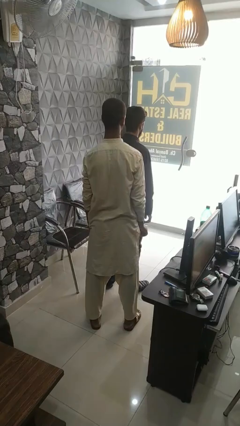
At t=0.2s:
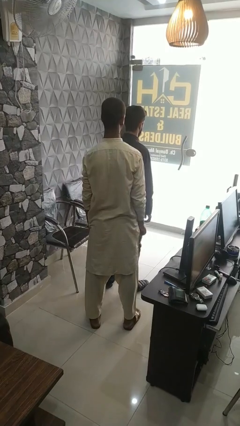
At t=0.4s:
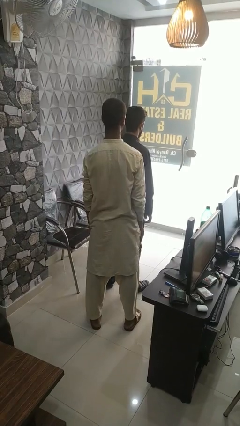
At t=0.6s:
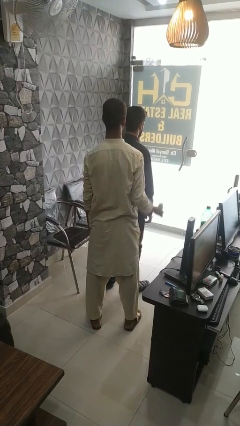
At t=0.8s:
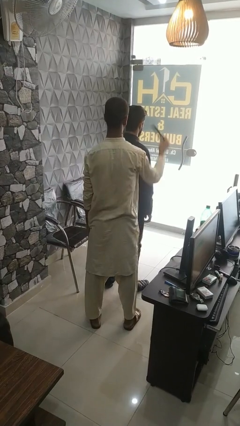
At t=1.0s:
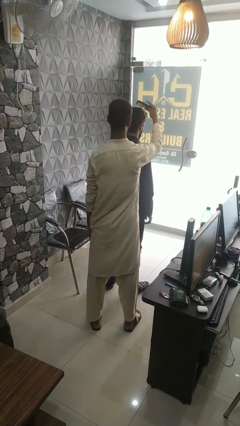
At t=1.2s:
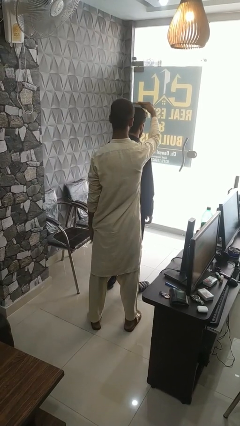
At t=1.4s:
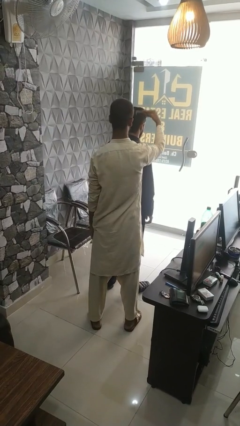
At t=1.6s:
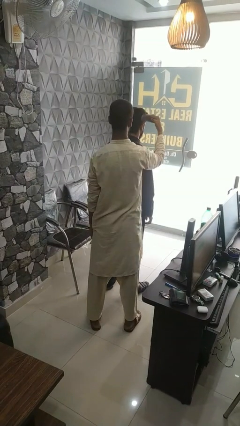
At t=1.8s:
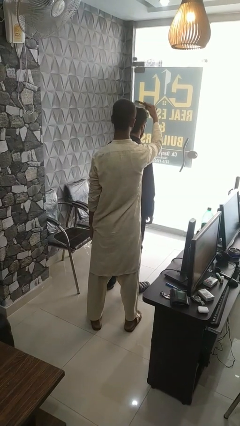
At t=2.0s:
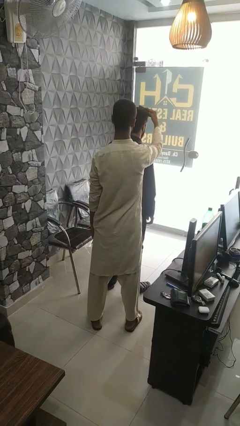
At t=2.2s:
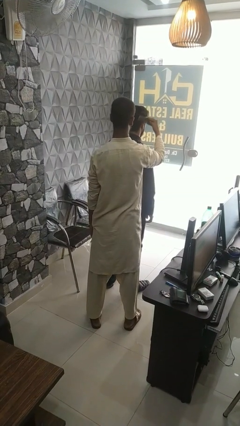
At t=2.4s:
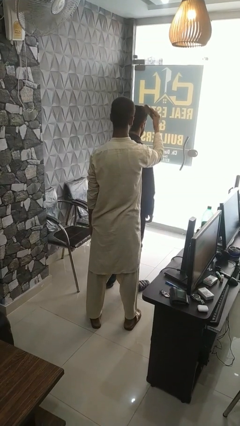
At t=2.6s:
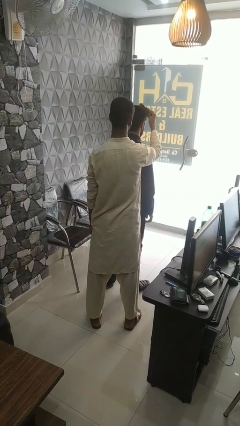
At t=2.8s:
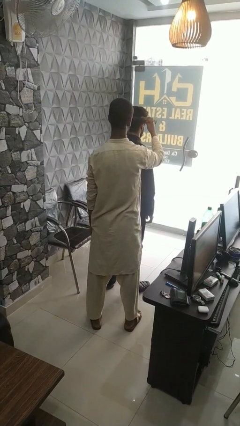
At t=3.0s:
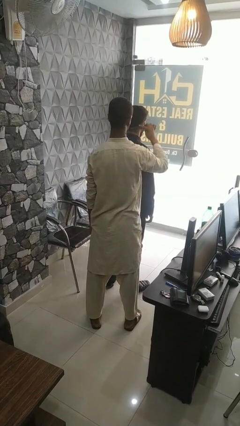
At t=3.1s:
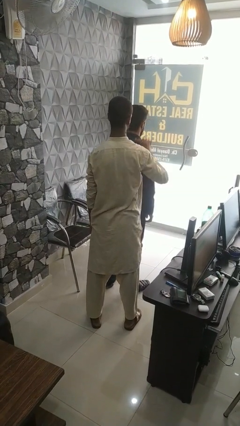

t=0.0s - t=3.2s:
person brushes hair of person

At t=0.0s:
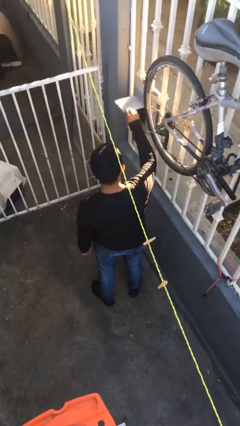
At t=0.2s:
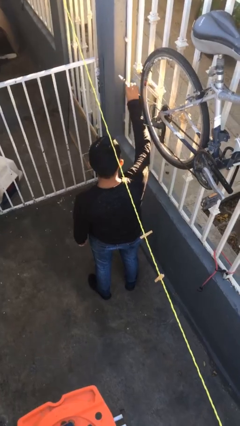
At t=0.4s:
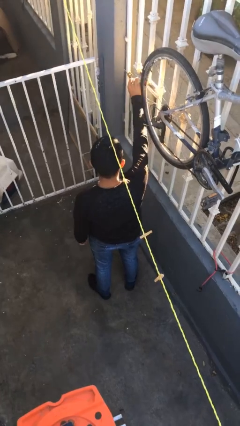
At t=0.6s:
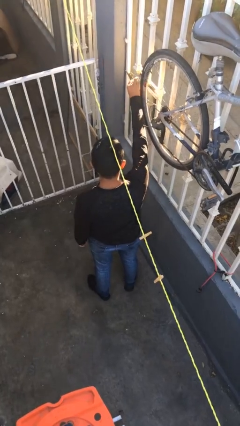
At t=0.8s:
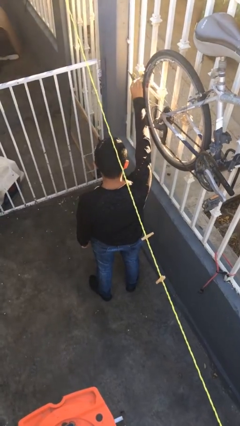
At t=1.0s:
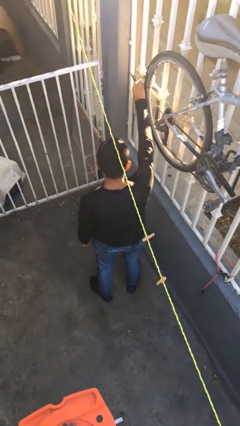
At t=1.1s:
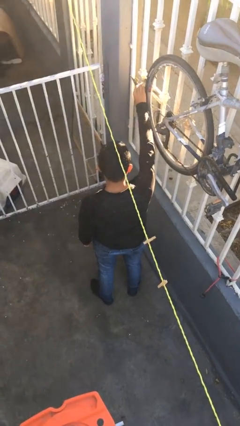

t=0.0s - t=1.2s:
person opens mailbox

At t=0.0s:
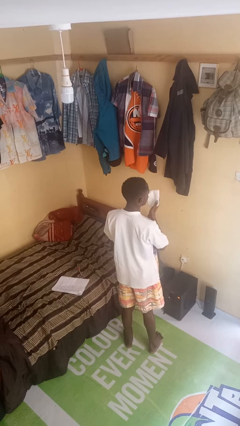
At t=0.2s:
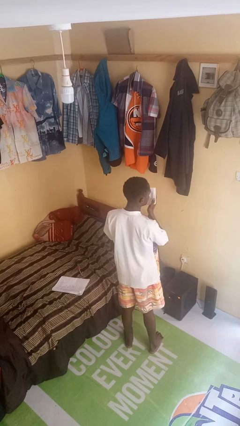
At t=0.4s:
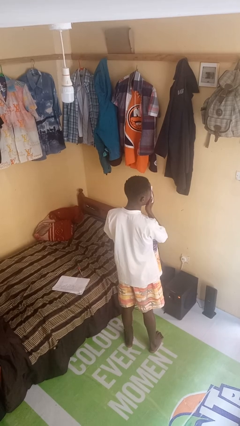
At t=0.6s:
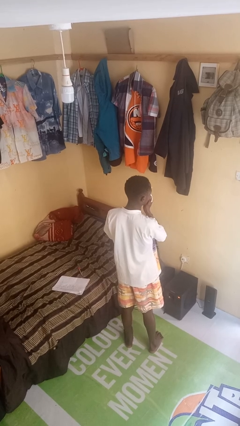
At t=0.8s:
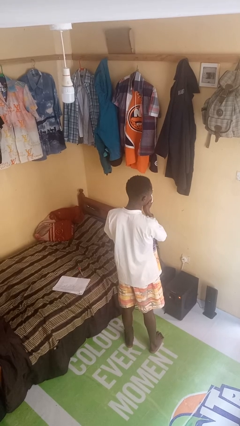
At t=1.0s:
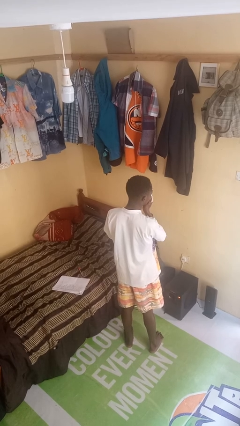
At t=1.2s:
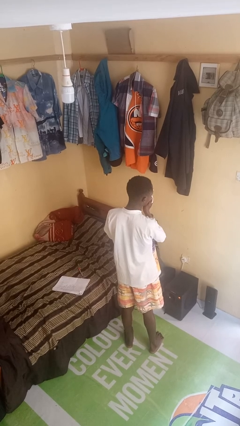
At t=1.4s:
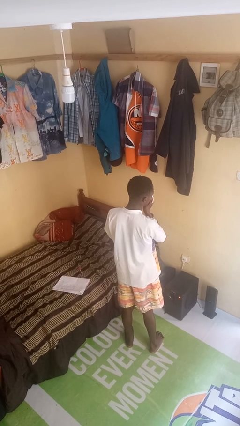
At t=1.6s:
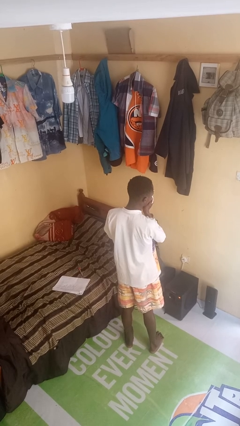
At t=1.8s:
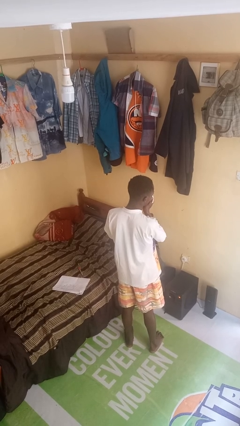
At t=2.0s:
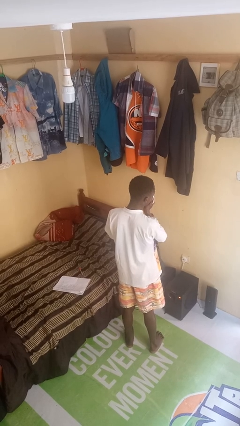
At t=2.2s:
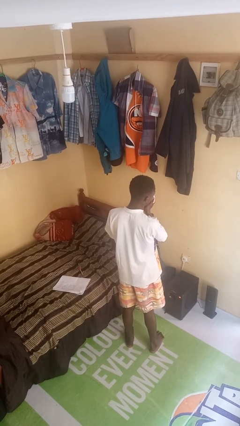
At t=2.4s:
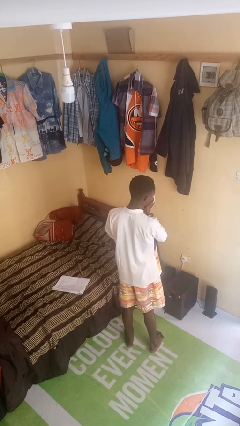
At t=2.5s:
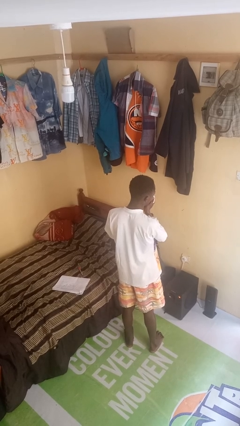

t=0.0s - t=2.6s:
person blows nose

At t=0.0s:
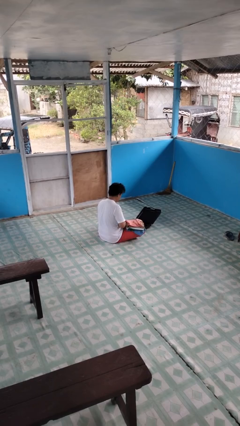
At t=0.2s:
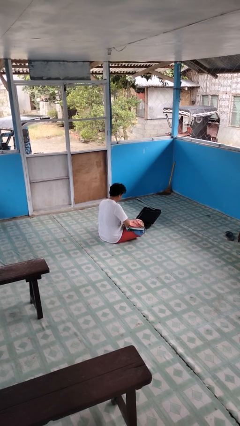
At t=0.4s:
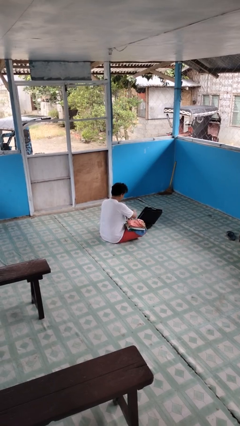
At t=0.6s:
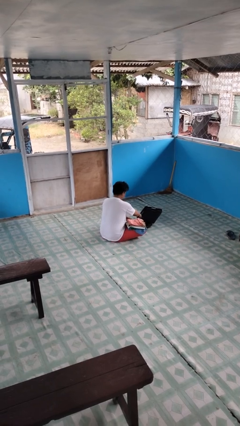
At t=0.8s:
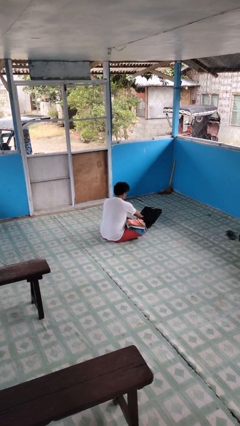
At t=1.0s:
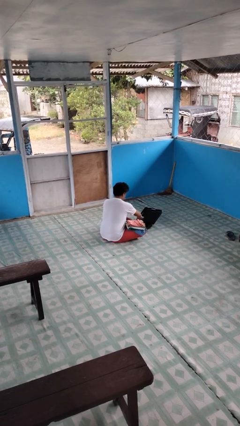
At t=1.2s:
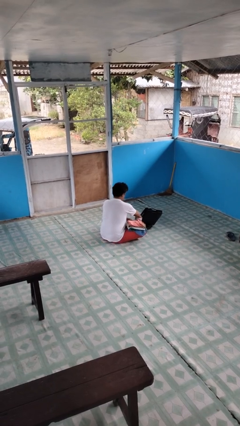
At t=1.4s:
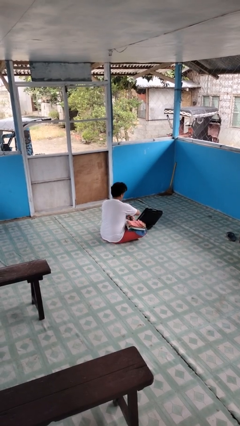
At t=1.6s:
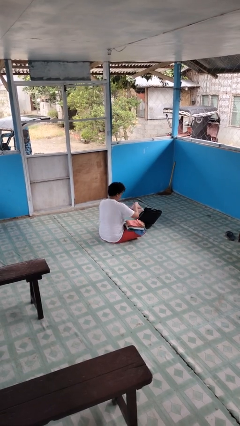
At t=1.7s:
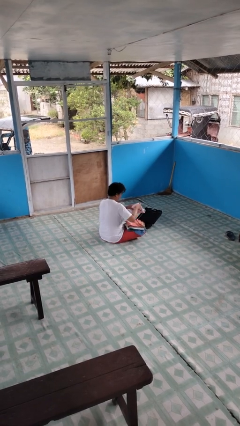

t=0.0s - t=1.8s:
person unloads clothes from suitcase

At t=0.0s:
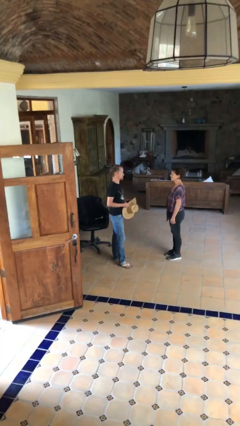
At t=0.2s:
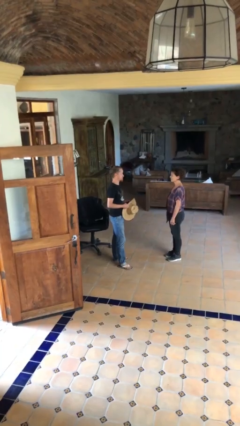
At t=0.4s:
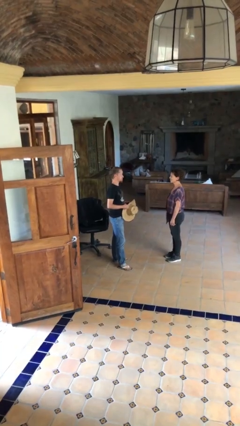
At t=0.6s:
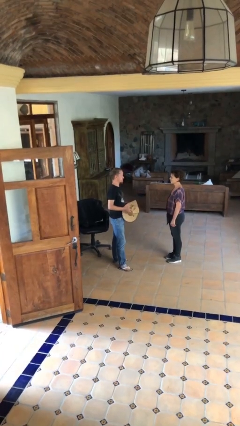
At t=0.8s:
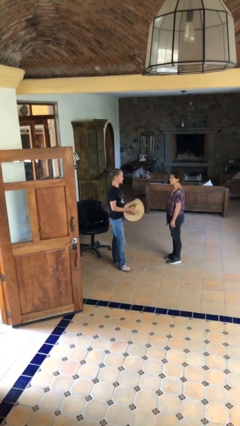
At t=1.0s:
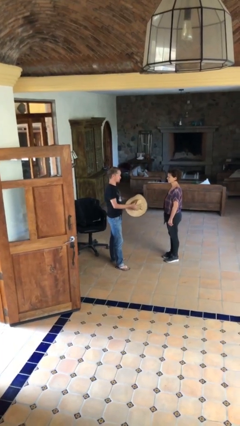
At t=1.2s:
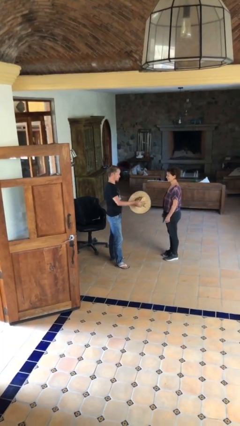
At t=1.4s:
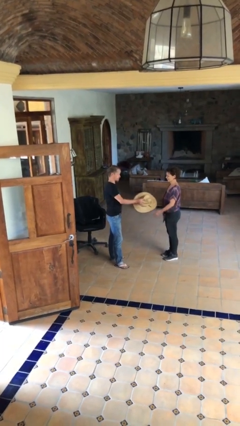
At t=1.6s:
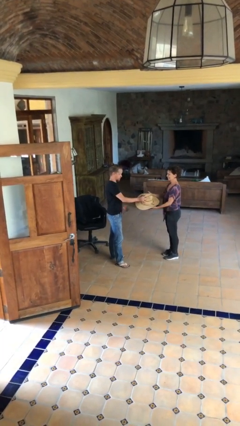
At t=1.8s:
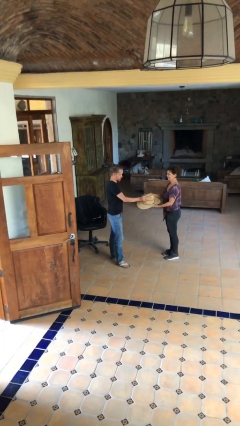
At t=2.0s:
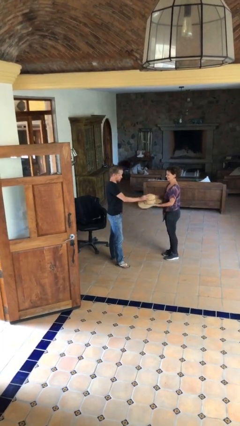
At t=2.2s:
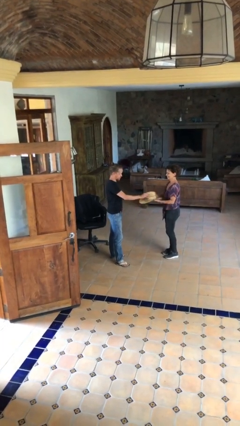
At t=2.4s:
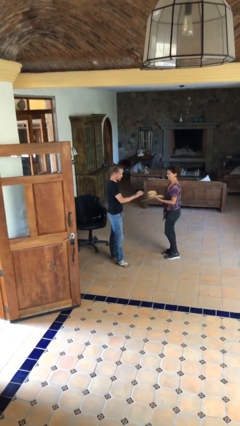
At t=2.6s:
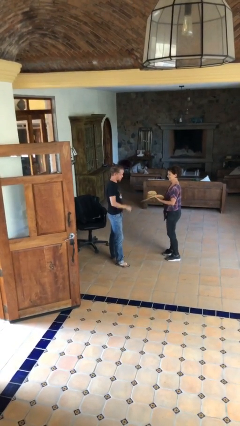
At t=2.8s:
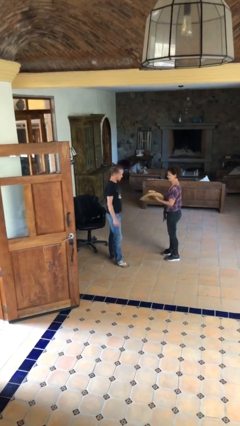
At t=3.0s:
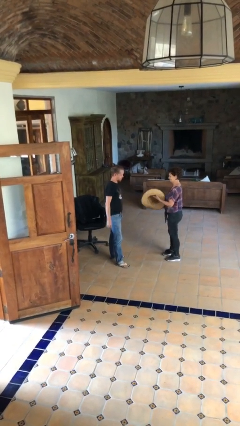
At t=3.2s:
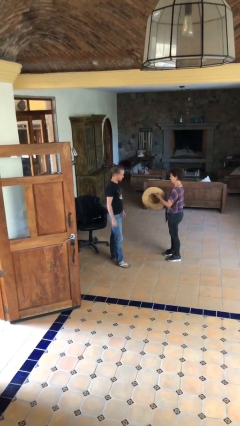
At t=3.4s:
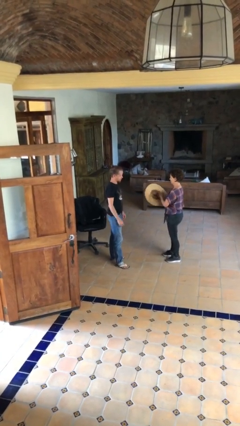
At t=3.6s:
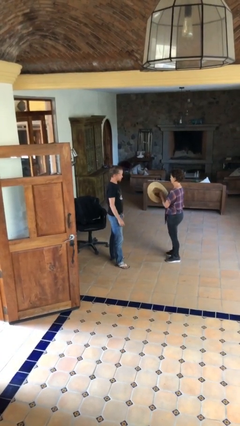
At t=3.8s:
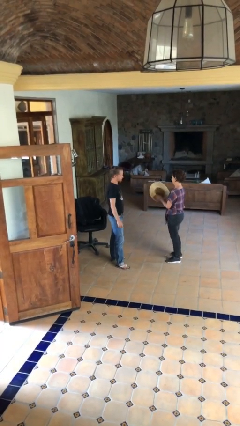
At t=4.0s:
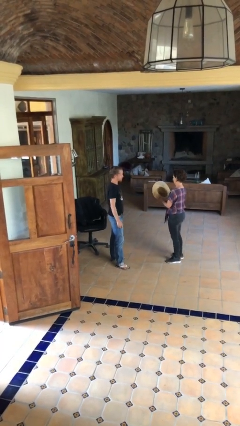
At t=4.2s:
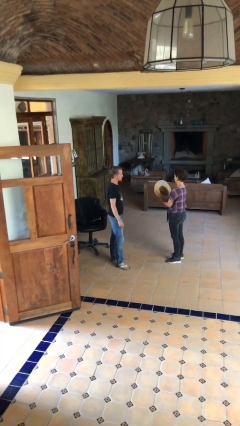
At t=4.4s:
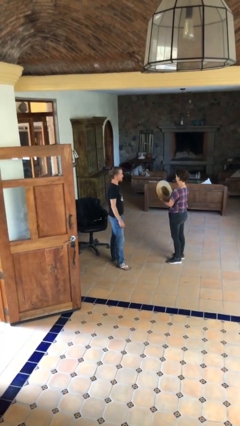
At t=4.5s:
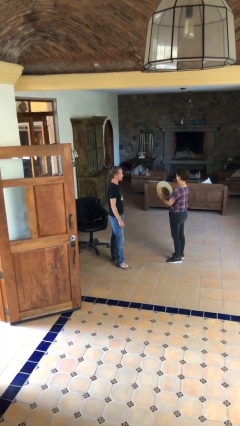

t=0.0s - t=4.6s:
person transfers object to person

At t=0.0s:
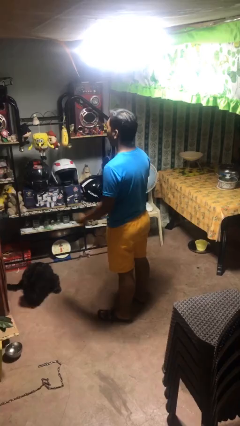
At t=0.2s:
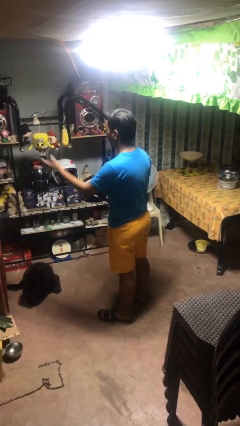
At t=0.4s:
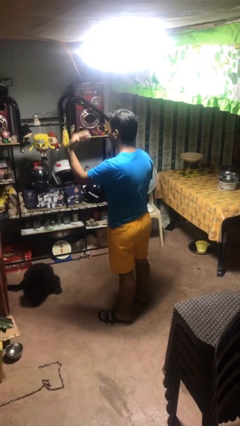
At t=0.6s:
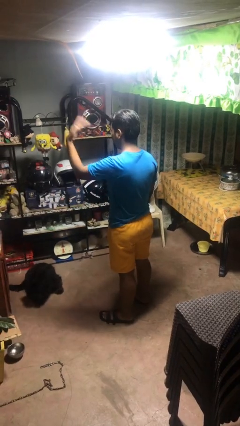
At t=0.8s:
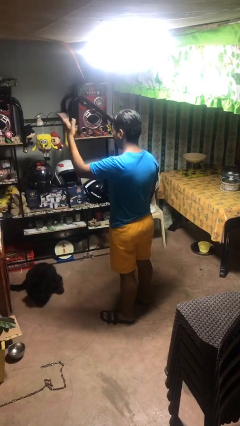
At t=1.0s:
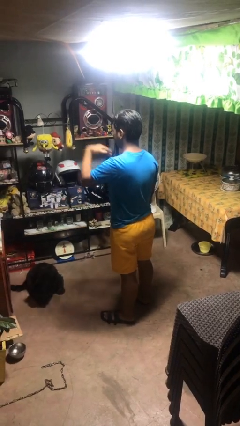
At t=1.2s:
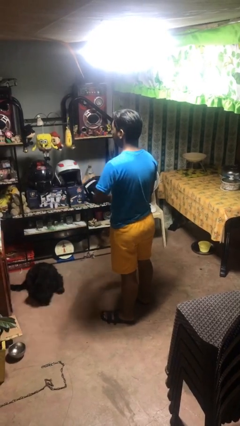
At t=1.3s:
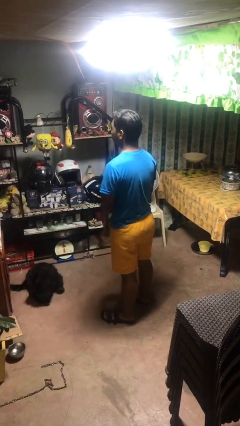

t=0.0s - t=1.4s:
person gestures come here

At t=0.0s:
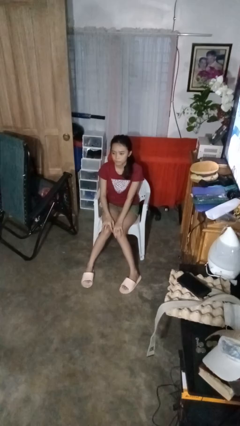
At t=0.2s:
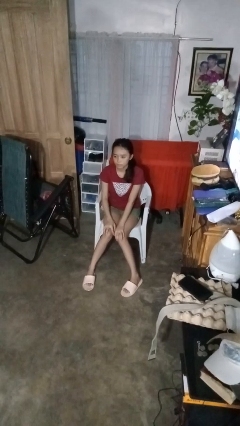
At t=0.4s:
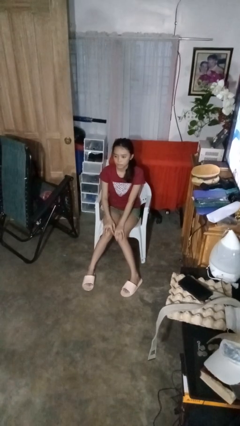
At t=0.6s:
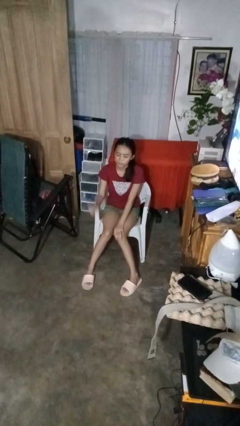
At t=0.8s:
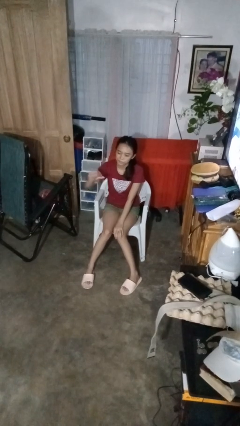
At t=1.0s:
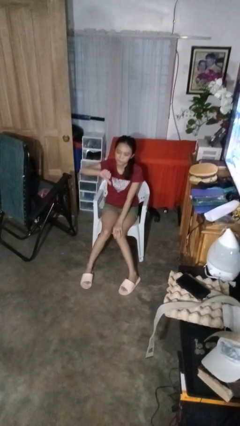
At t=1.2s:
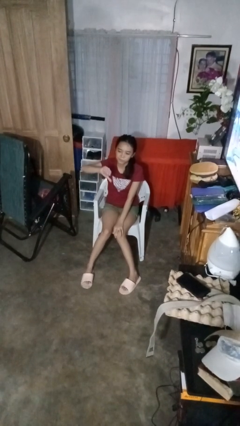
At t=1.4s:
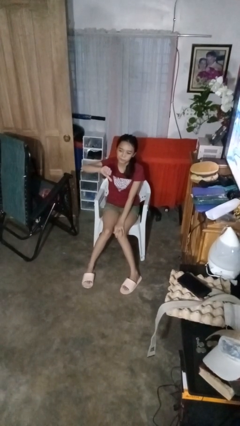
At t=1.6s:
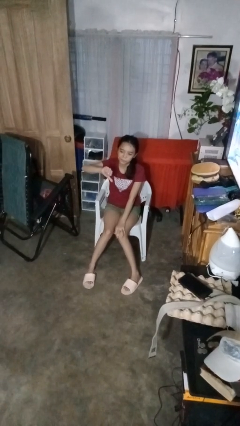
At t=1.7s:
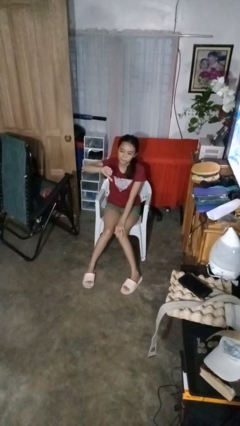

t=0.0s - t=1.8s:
person gestures thumbs down

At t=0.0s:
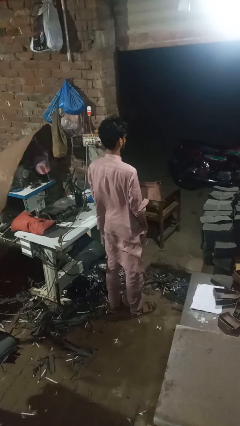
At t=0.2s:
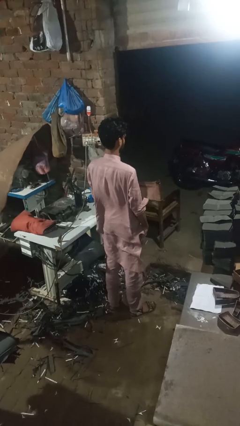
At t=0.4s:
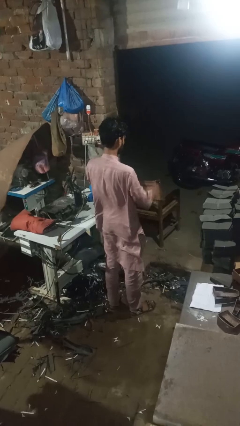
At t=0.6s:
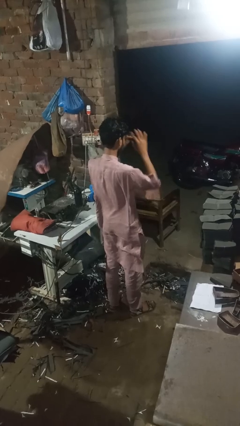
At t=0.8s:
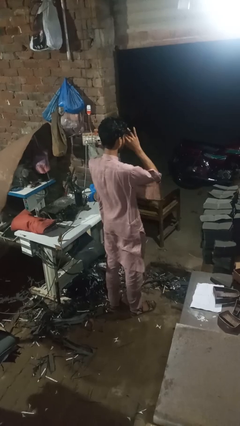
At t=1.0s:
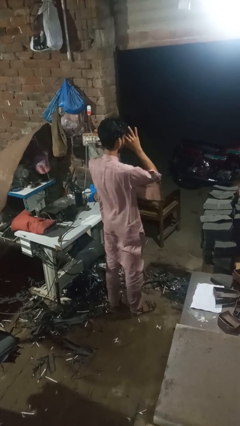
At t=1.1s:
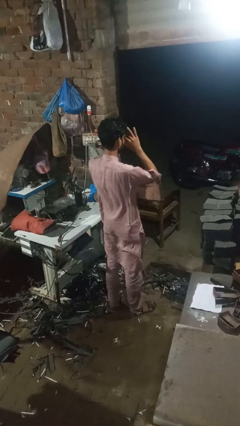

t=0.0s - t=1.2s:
person rubs eyes
